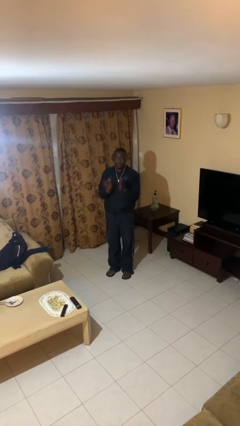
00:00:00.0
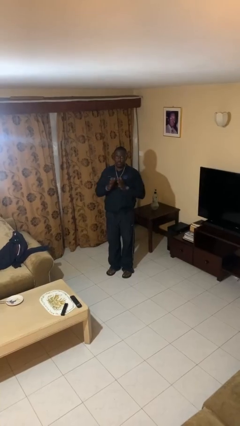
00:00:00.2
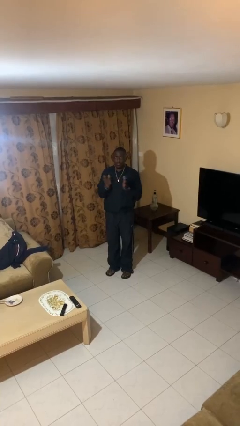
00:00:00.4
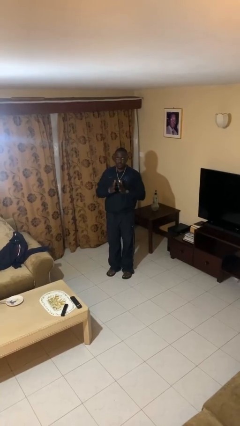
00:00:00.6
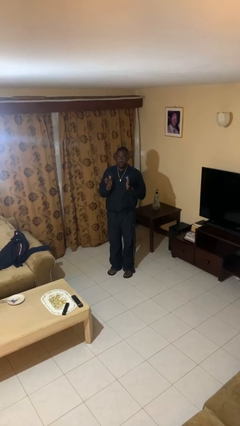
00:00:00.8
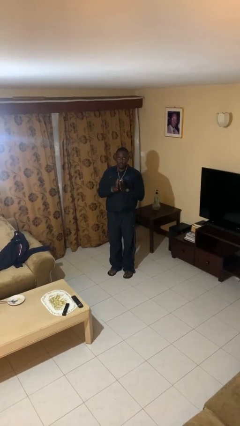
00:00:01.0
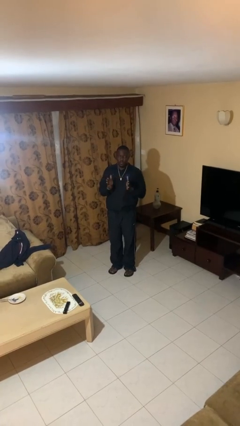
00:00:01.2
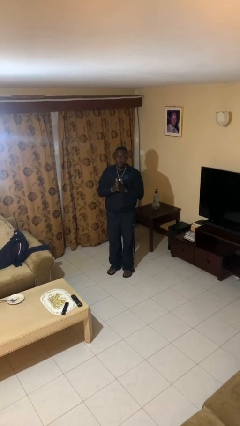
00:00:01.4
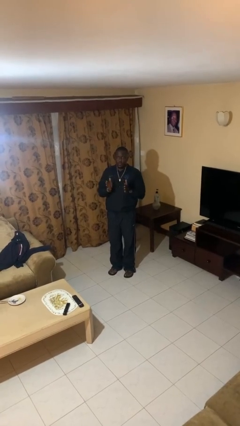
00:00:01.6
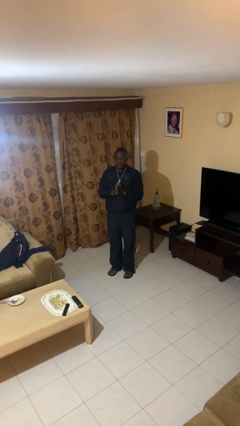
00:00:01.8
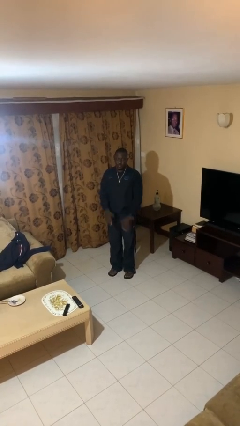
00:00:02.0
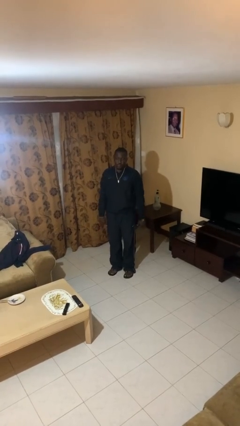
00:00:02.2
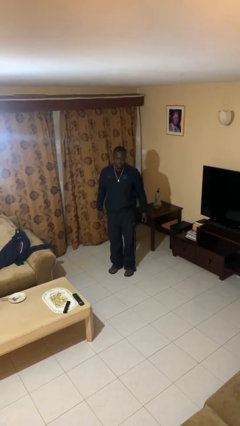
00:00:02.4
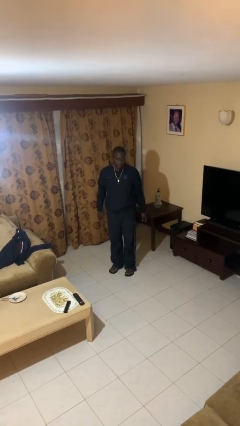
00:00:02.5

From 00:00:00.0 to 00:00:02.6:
person claps hands

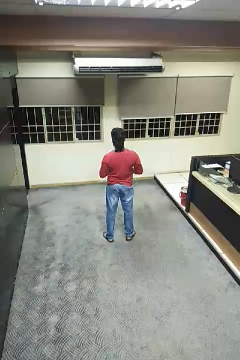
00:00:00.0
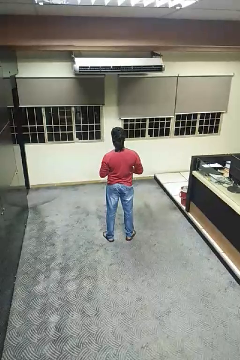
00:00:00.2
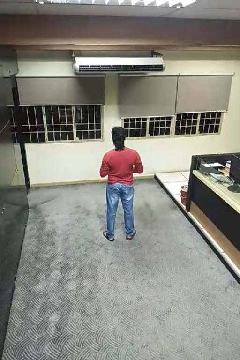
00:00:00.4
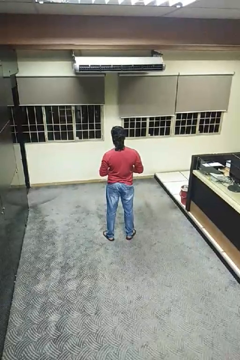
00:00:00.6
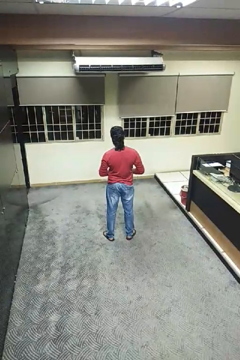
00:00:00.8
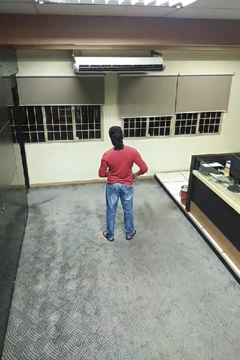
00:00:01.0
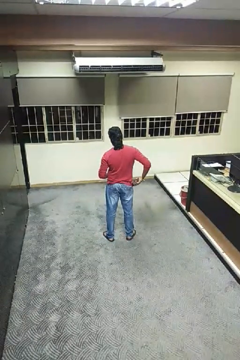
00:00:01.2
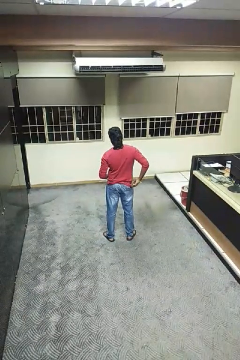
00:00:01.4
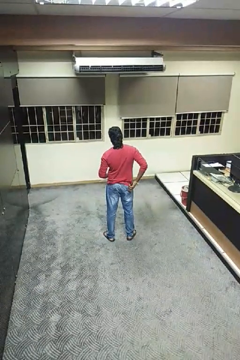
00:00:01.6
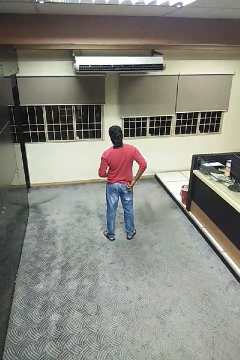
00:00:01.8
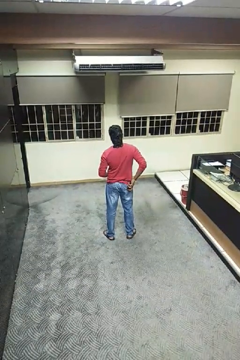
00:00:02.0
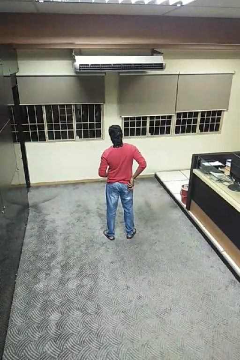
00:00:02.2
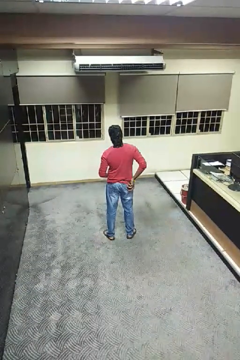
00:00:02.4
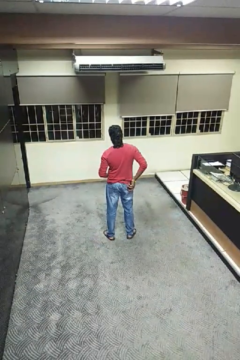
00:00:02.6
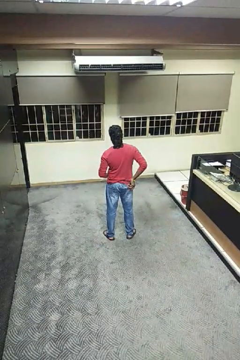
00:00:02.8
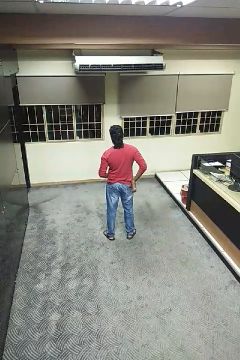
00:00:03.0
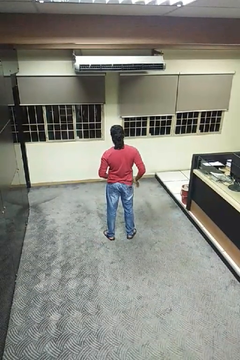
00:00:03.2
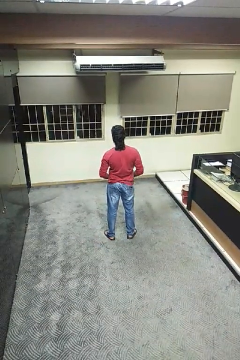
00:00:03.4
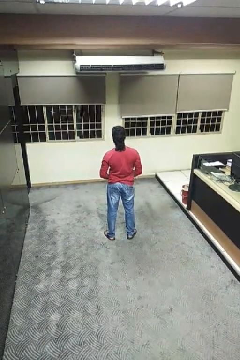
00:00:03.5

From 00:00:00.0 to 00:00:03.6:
person puts phone into pocket

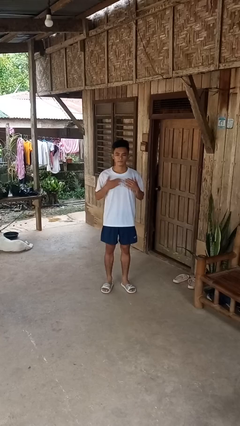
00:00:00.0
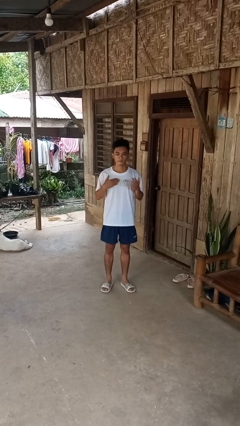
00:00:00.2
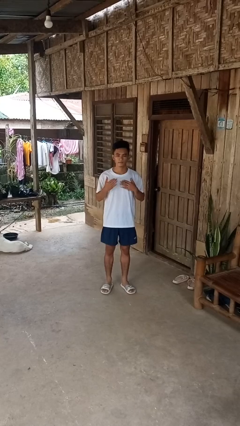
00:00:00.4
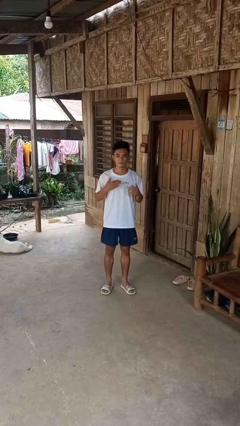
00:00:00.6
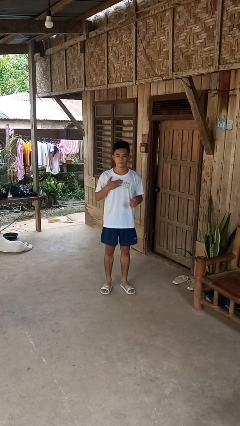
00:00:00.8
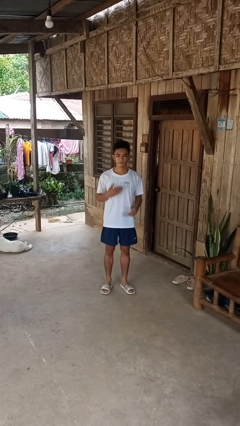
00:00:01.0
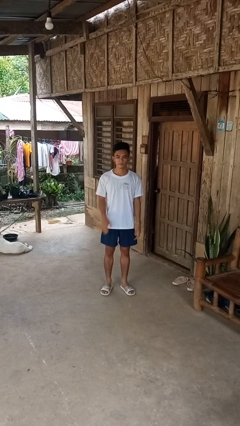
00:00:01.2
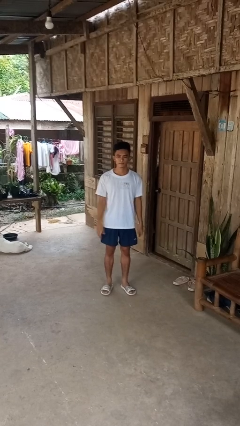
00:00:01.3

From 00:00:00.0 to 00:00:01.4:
person drums on chest

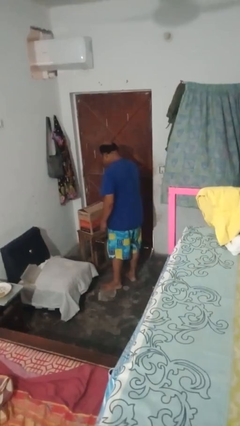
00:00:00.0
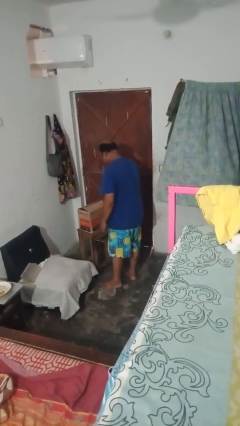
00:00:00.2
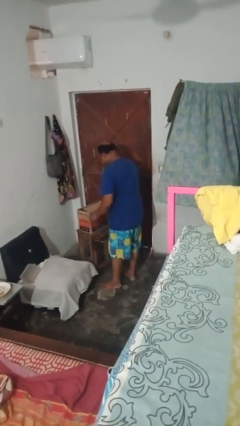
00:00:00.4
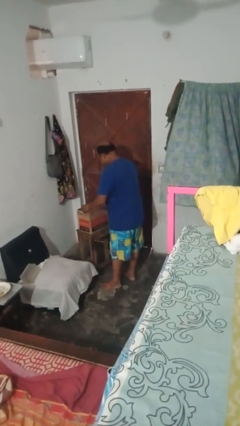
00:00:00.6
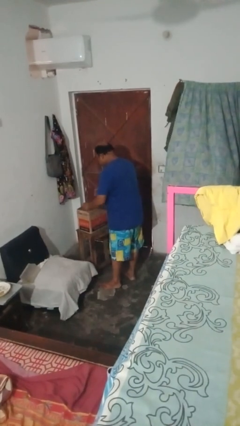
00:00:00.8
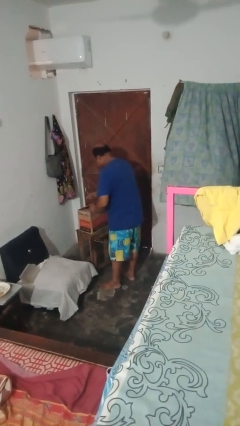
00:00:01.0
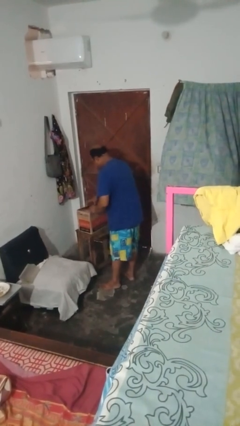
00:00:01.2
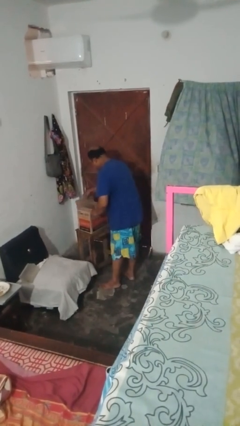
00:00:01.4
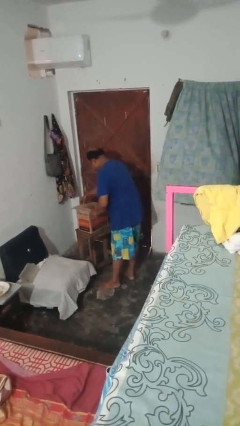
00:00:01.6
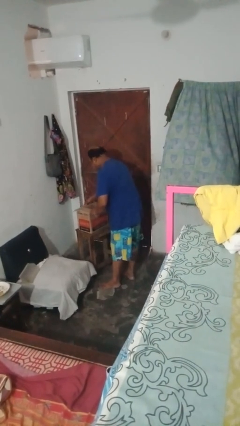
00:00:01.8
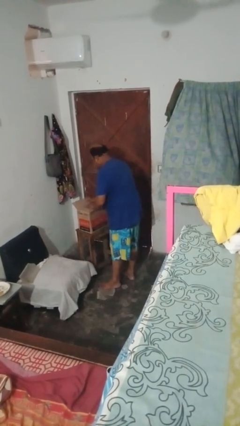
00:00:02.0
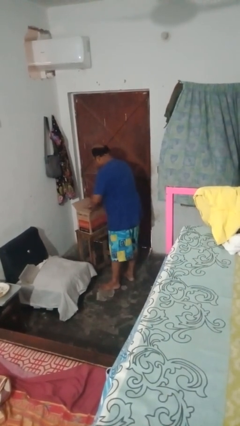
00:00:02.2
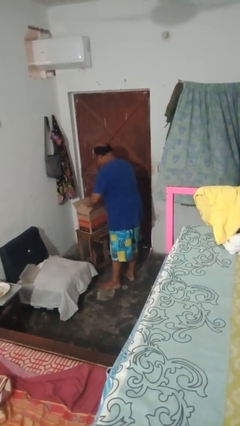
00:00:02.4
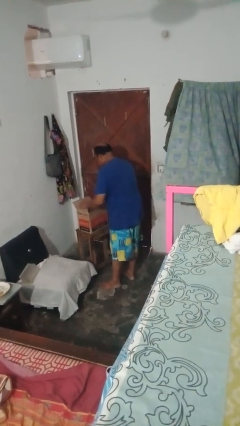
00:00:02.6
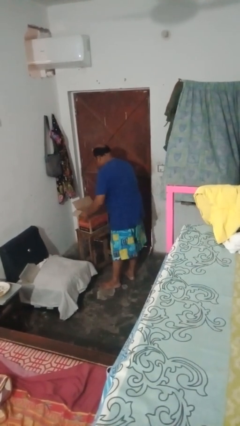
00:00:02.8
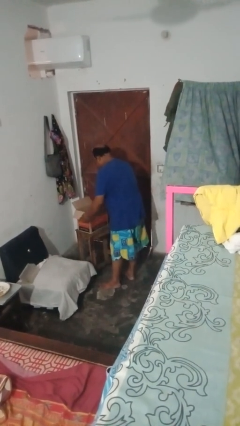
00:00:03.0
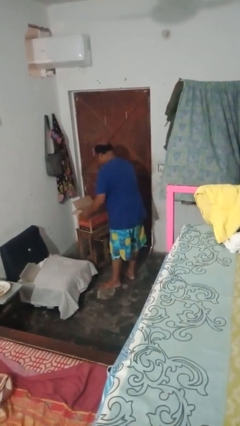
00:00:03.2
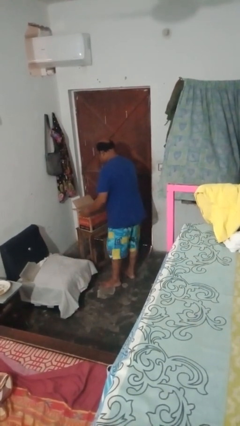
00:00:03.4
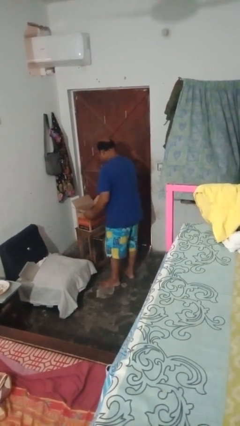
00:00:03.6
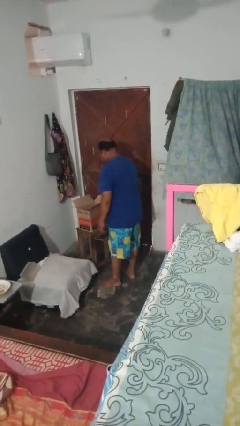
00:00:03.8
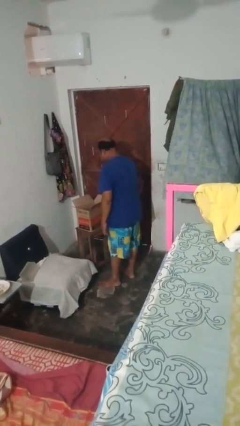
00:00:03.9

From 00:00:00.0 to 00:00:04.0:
person opens box

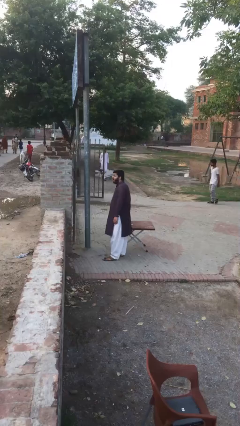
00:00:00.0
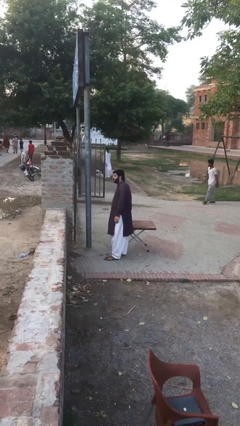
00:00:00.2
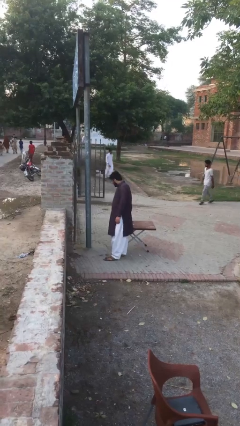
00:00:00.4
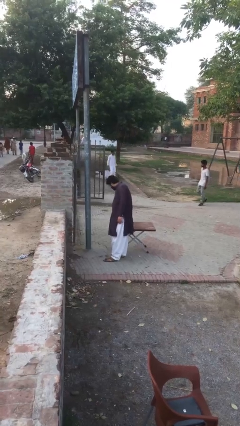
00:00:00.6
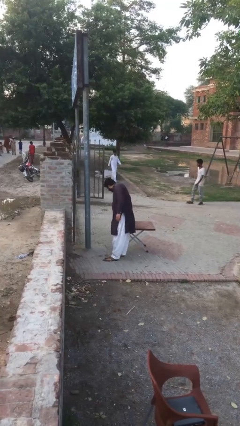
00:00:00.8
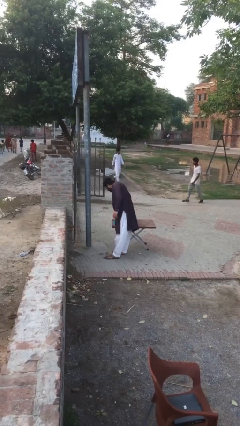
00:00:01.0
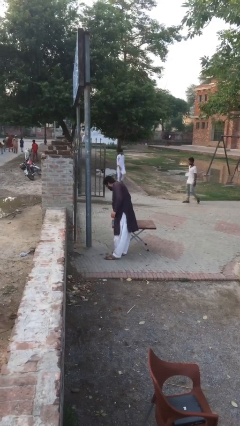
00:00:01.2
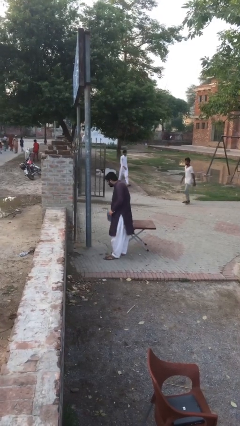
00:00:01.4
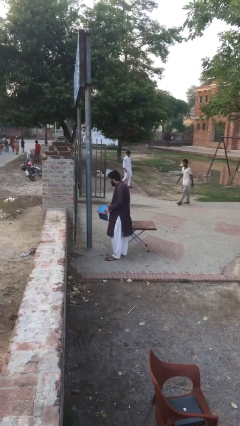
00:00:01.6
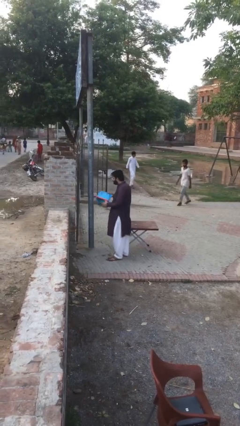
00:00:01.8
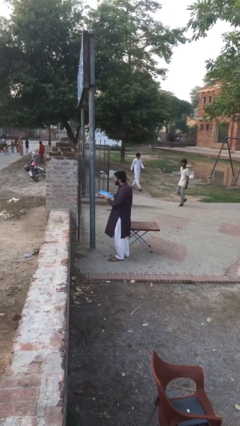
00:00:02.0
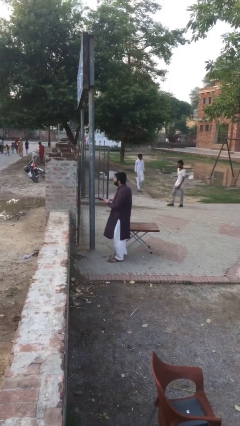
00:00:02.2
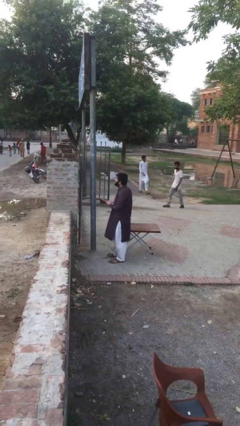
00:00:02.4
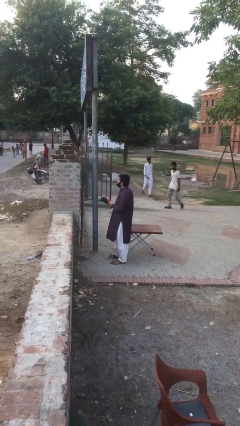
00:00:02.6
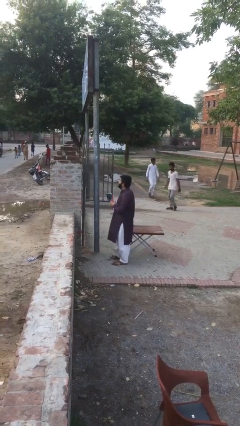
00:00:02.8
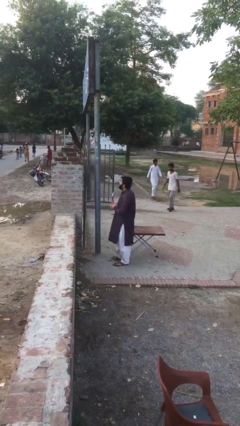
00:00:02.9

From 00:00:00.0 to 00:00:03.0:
person picks up object from table

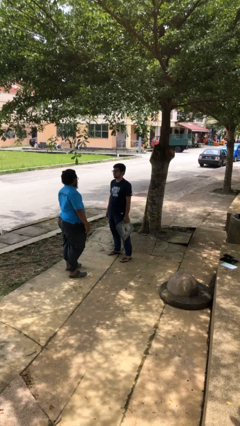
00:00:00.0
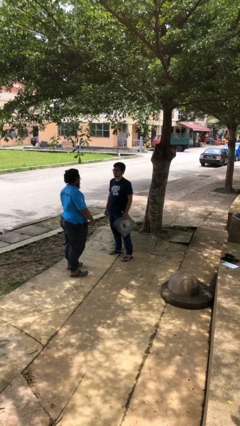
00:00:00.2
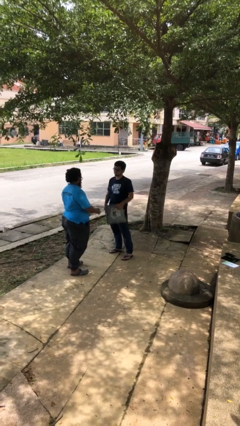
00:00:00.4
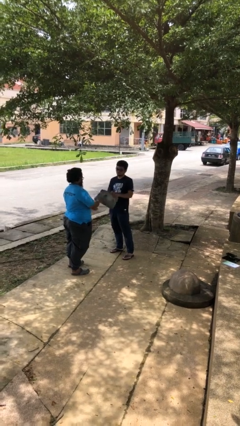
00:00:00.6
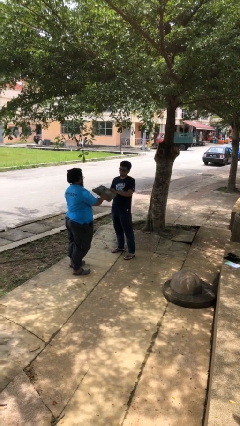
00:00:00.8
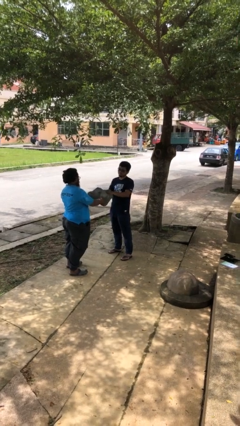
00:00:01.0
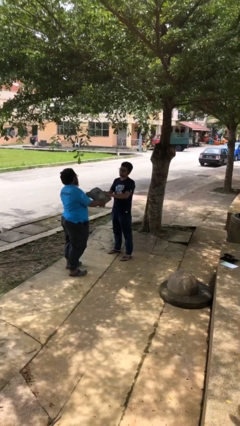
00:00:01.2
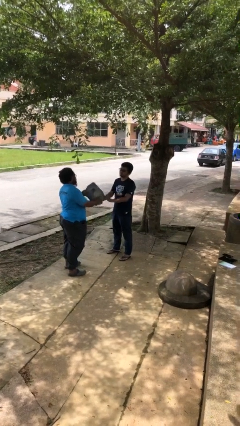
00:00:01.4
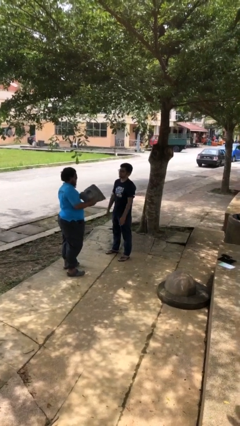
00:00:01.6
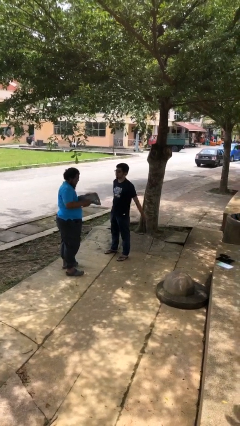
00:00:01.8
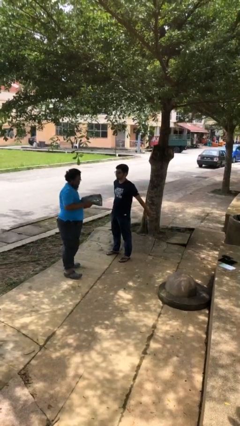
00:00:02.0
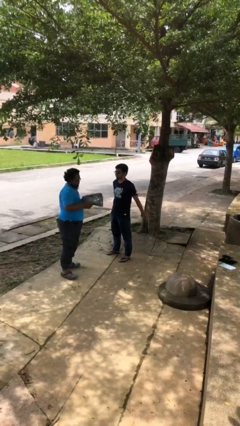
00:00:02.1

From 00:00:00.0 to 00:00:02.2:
person transfers object to person

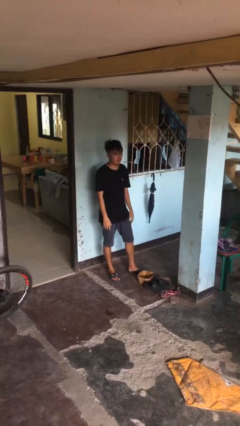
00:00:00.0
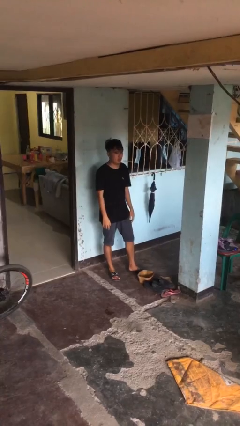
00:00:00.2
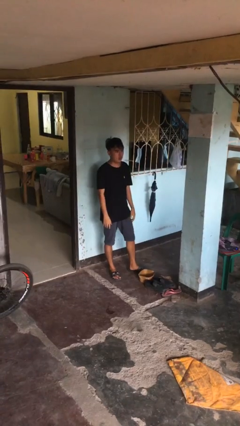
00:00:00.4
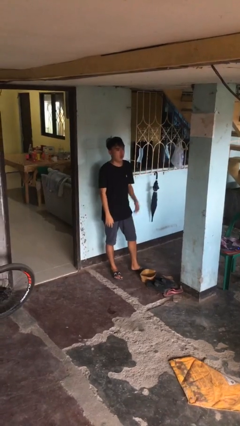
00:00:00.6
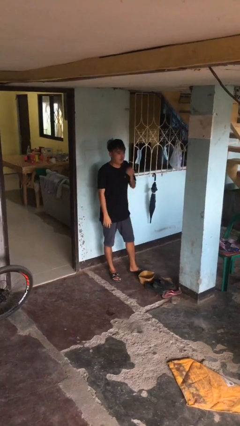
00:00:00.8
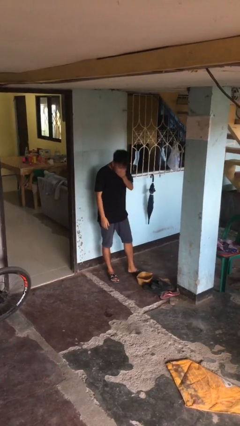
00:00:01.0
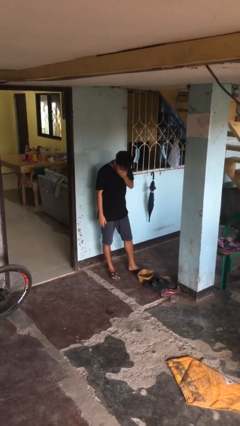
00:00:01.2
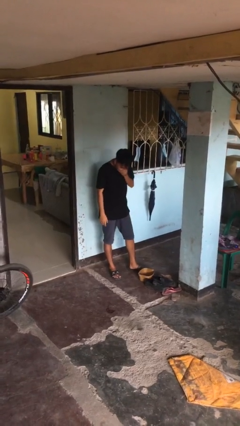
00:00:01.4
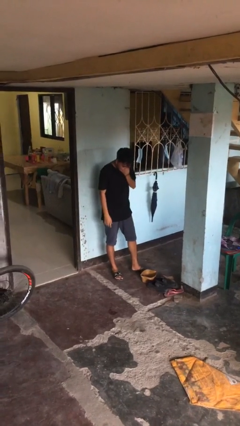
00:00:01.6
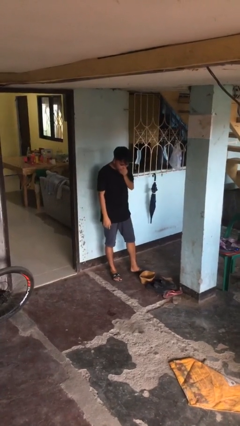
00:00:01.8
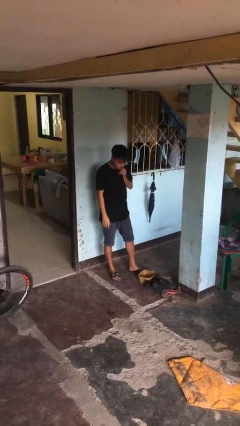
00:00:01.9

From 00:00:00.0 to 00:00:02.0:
person sneezes into hand
